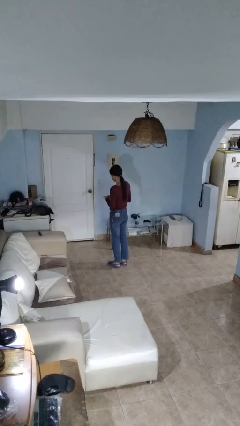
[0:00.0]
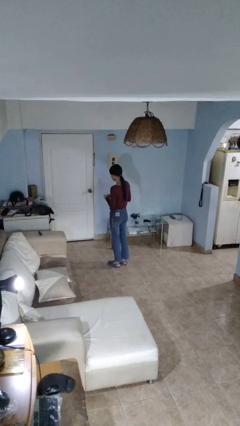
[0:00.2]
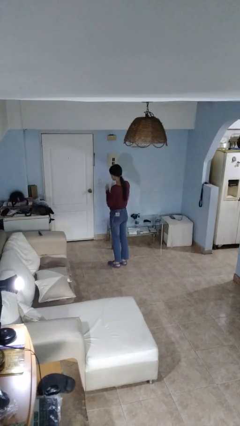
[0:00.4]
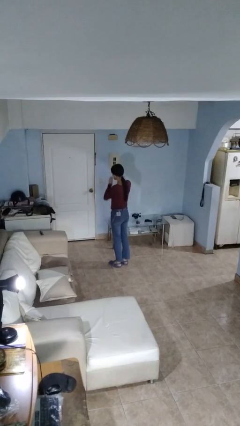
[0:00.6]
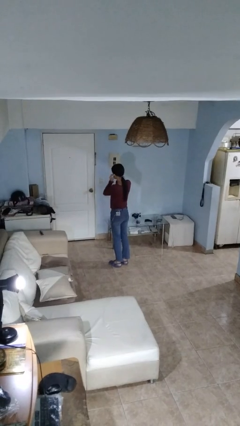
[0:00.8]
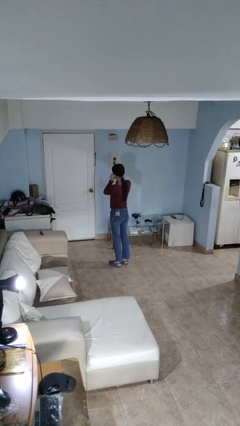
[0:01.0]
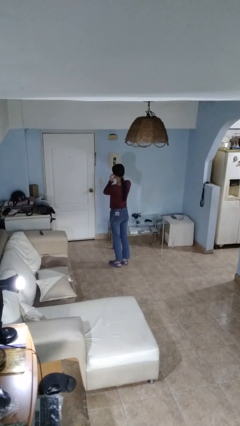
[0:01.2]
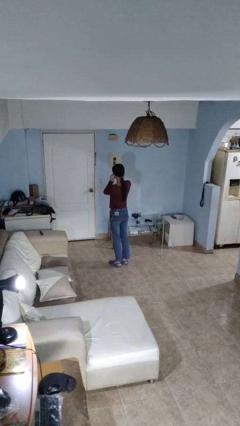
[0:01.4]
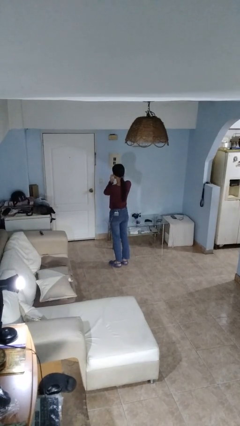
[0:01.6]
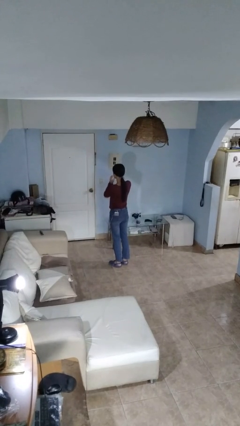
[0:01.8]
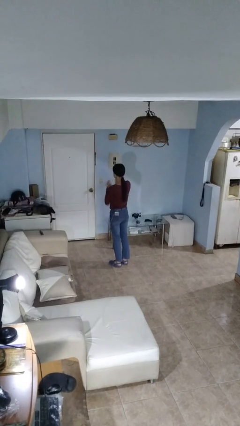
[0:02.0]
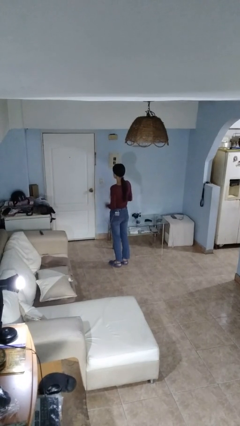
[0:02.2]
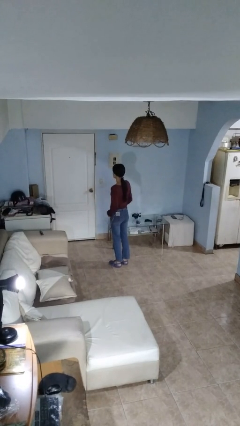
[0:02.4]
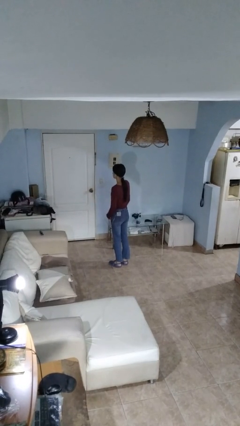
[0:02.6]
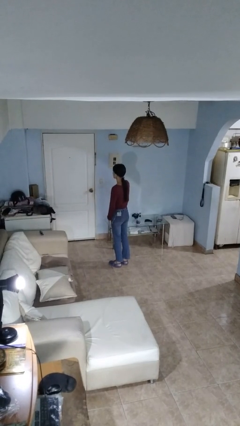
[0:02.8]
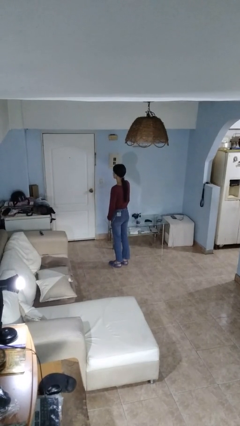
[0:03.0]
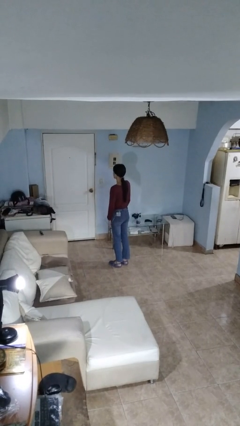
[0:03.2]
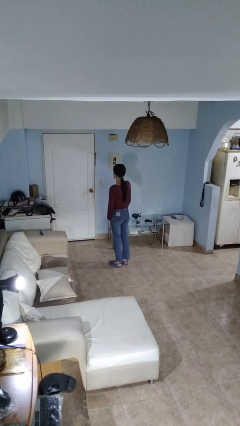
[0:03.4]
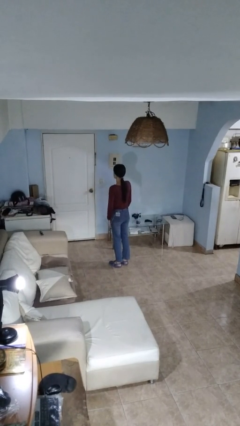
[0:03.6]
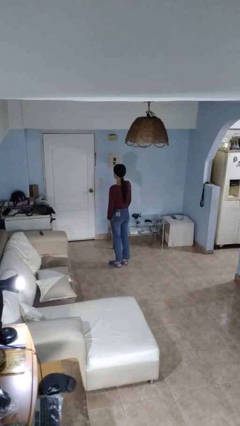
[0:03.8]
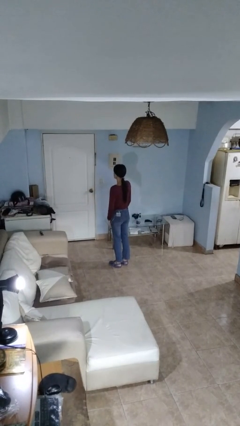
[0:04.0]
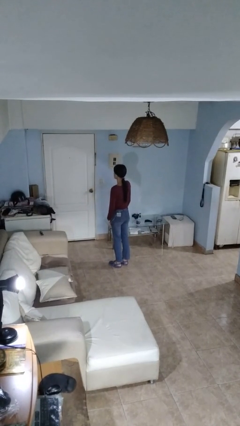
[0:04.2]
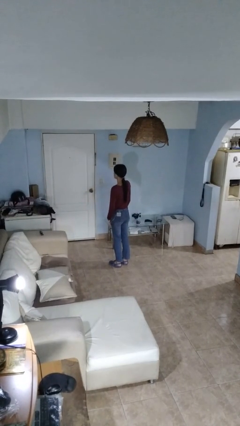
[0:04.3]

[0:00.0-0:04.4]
person puts on headphones

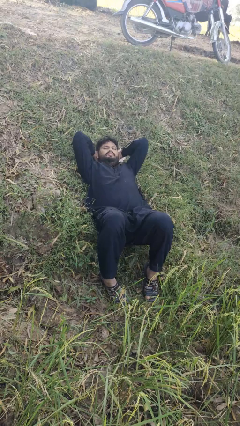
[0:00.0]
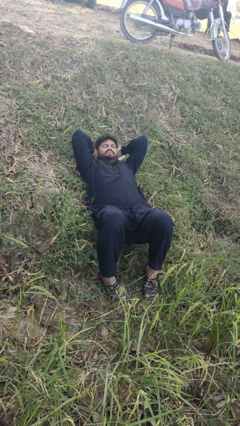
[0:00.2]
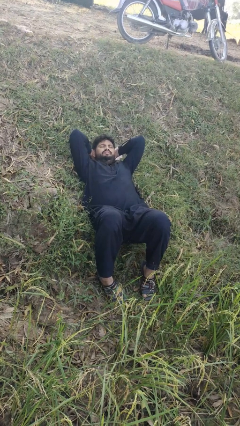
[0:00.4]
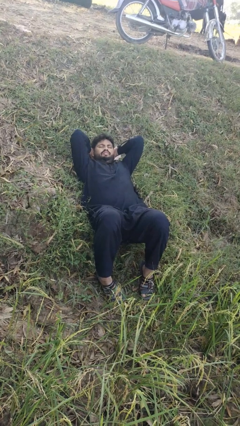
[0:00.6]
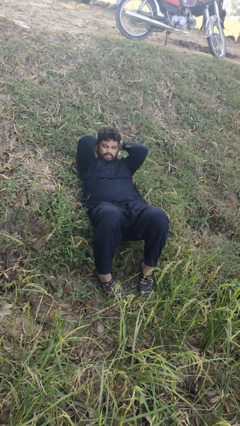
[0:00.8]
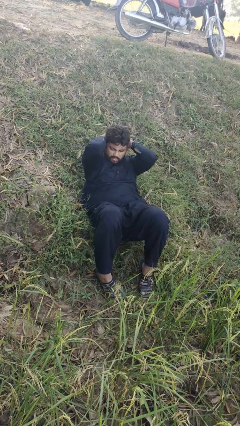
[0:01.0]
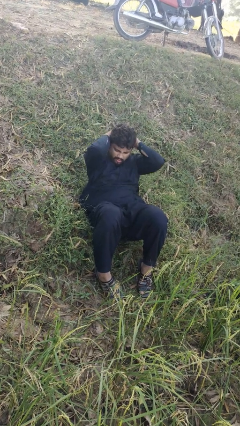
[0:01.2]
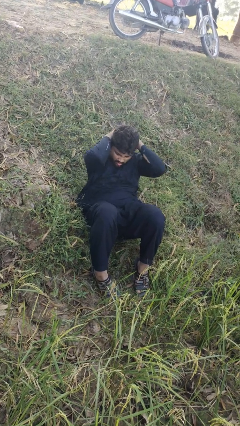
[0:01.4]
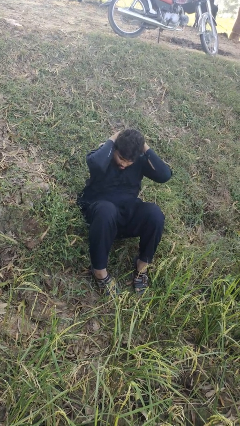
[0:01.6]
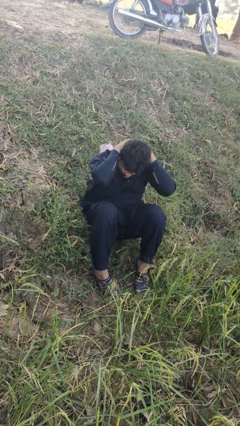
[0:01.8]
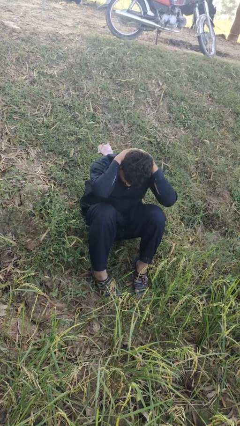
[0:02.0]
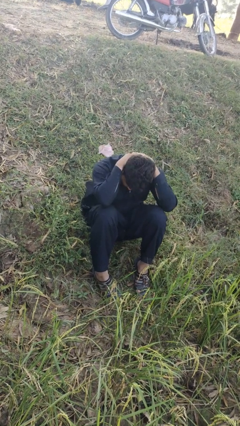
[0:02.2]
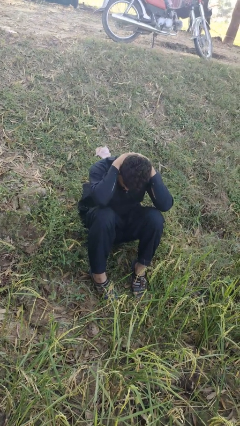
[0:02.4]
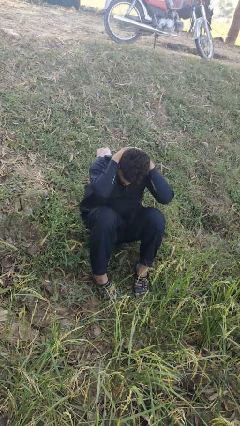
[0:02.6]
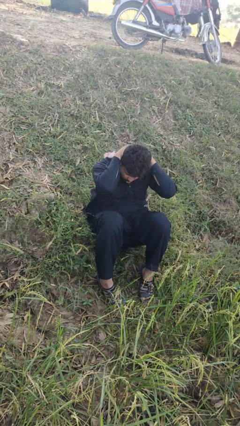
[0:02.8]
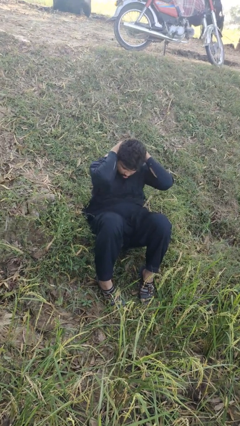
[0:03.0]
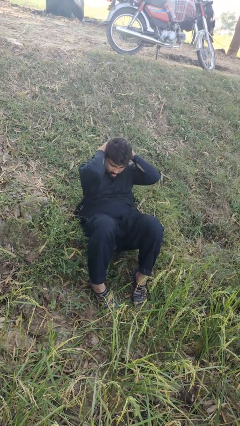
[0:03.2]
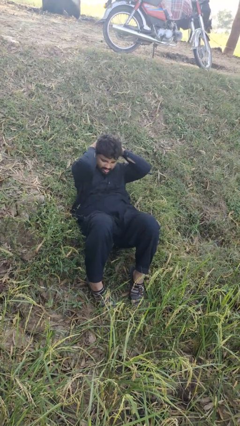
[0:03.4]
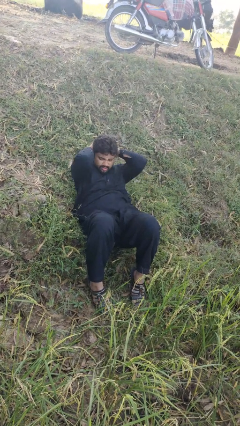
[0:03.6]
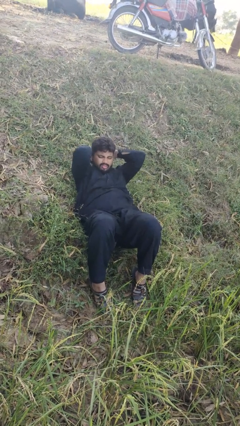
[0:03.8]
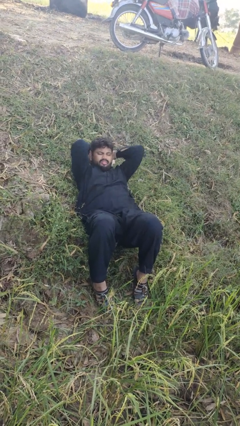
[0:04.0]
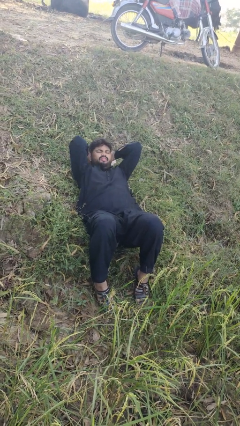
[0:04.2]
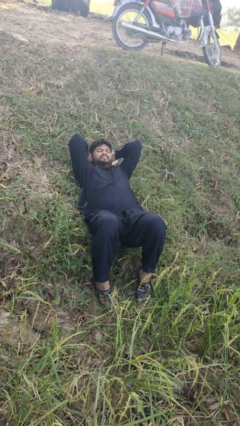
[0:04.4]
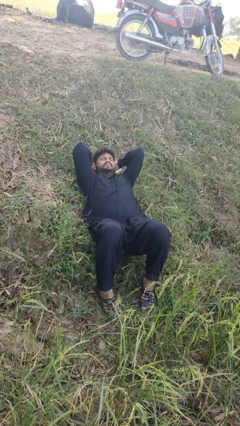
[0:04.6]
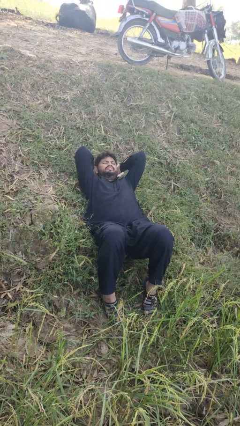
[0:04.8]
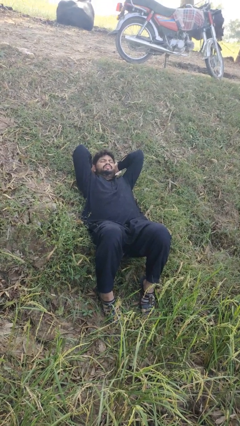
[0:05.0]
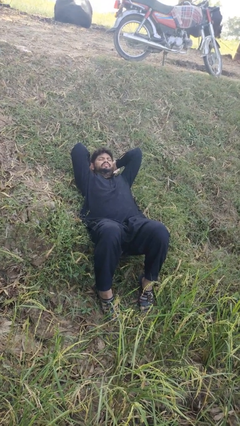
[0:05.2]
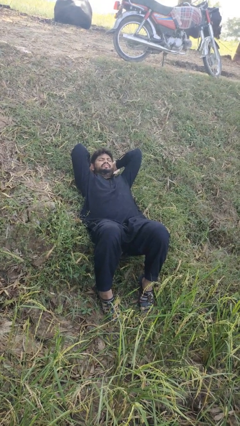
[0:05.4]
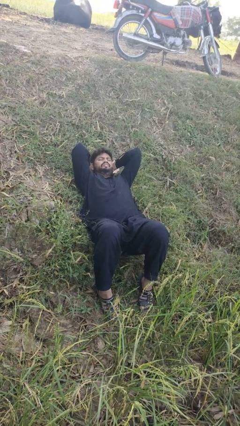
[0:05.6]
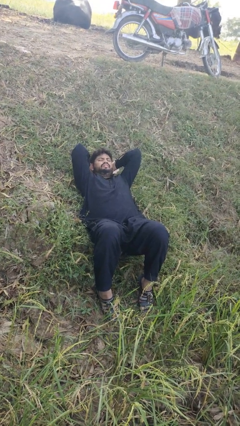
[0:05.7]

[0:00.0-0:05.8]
person exercises with situp

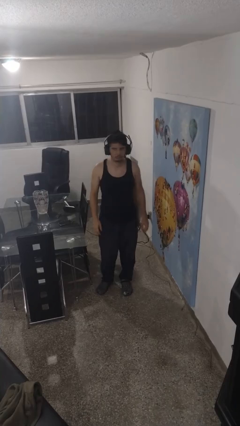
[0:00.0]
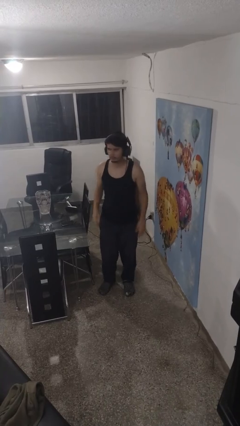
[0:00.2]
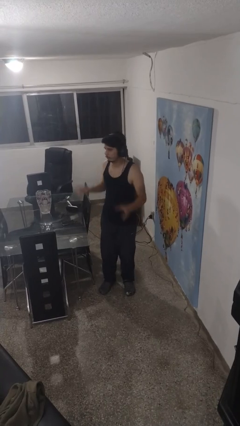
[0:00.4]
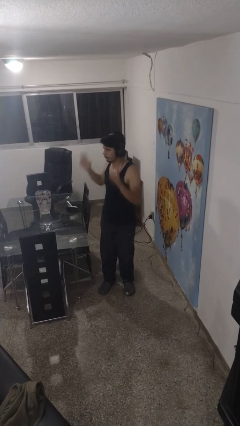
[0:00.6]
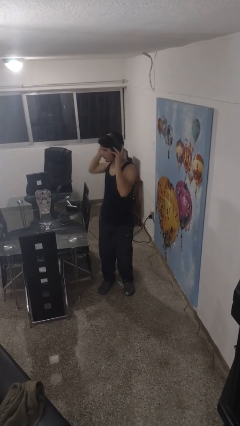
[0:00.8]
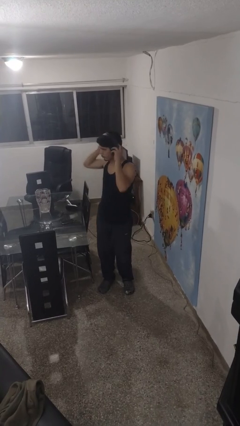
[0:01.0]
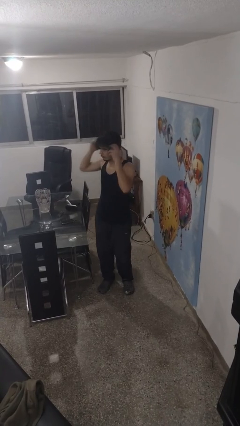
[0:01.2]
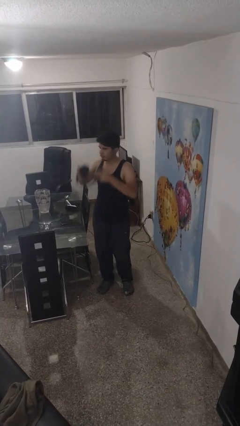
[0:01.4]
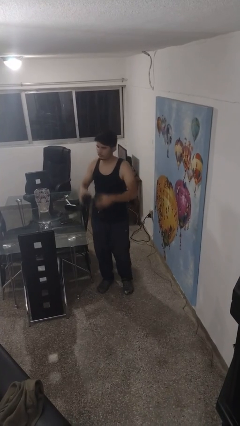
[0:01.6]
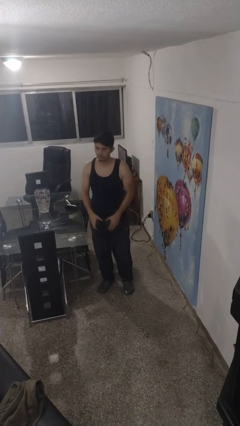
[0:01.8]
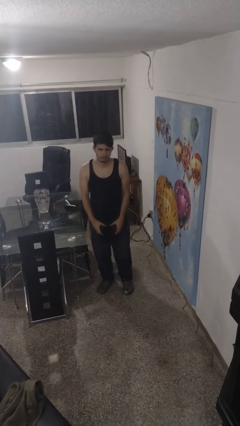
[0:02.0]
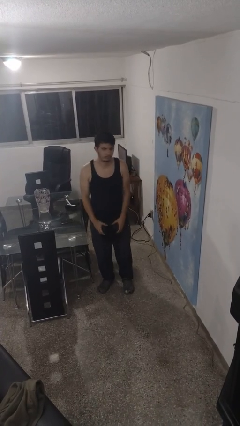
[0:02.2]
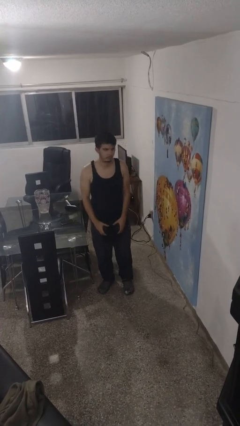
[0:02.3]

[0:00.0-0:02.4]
person takes off headphones

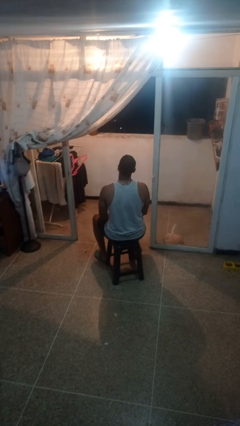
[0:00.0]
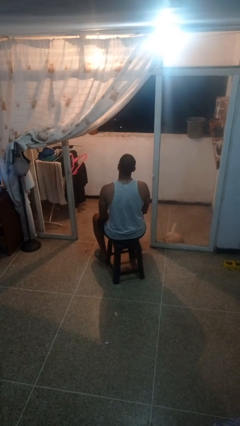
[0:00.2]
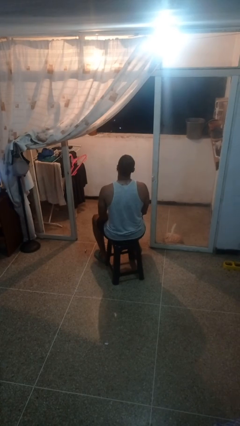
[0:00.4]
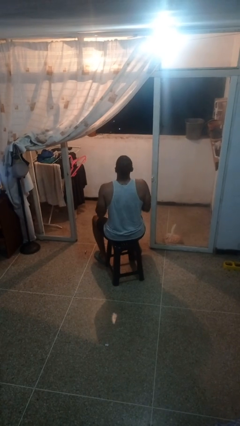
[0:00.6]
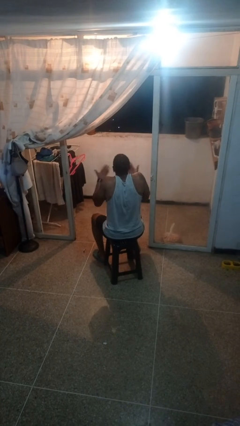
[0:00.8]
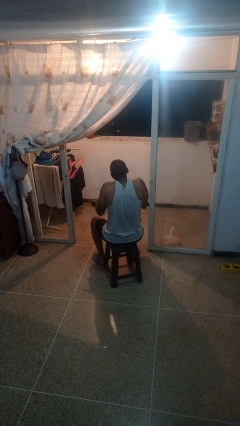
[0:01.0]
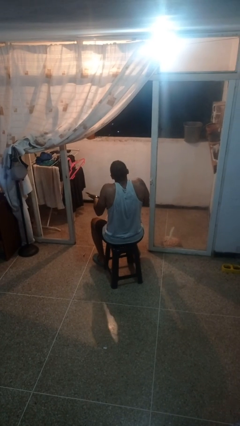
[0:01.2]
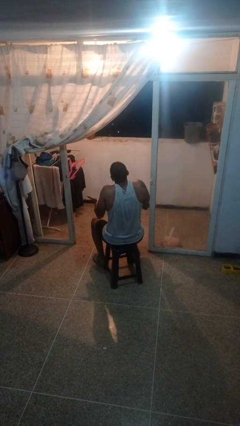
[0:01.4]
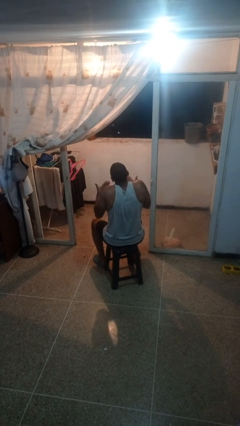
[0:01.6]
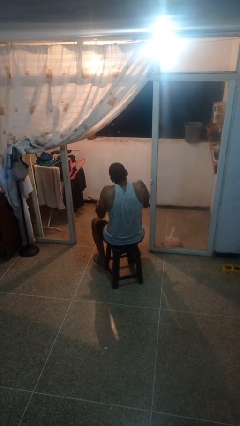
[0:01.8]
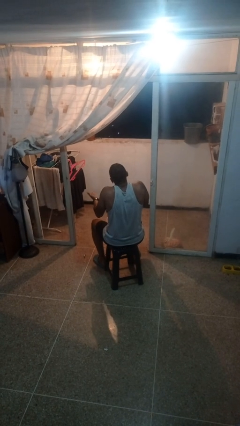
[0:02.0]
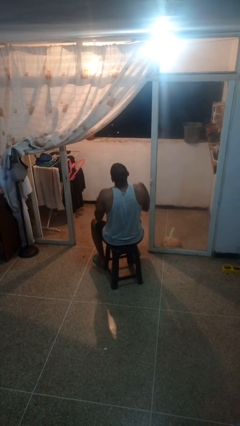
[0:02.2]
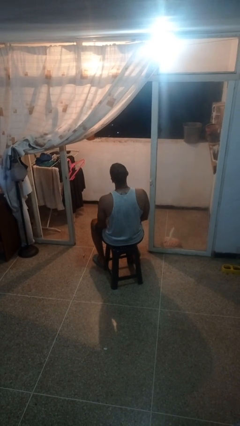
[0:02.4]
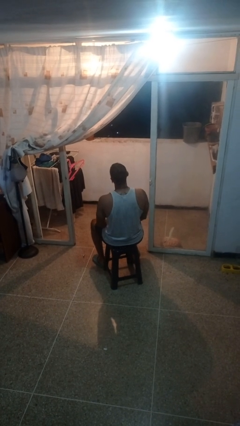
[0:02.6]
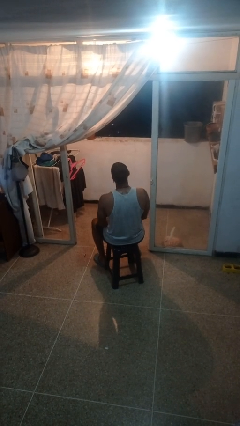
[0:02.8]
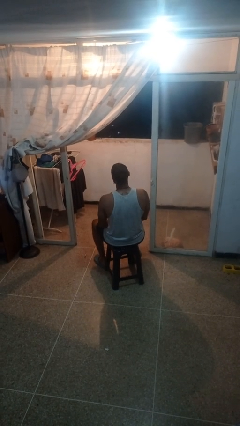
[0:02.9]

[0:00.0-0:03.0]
person shrugs

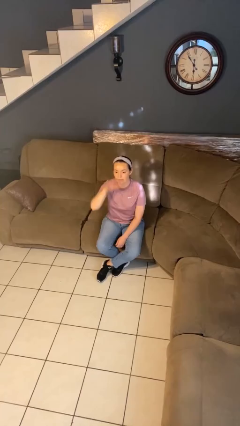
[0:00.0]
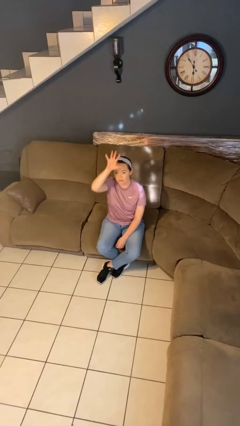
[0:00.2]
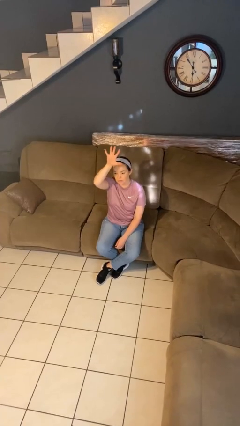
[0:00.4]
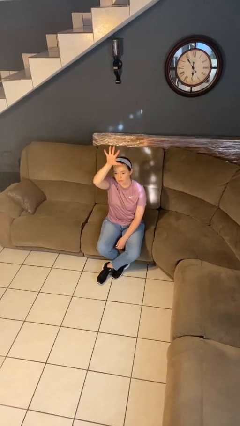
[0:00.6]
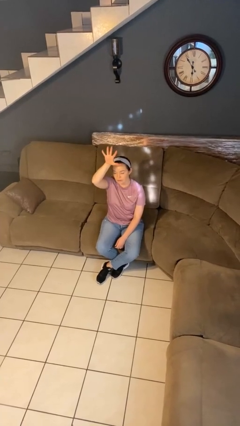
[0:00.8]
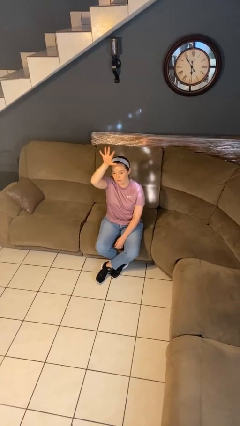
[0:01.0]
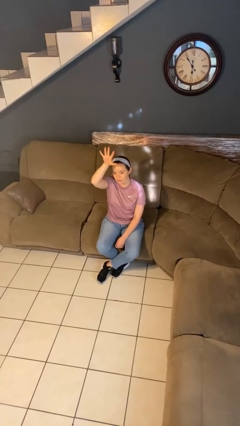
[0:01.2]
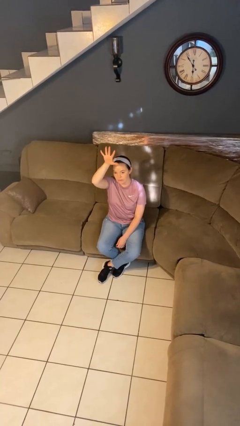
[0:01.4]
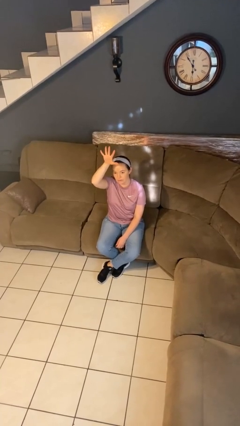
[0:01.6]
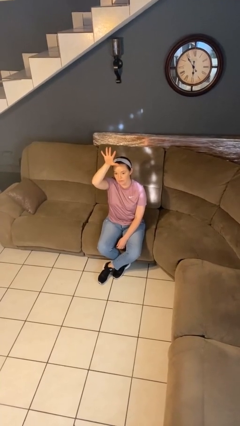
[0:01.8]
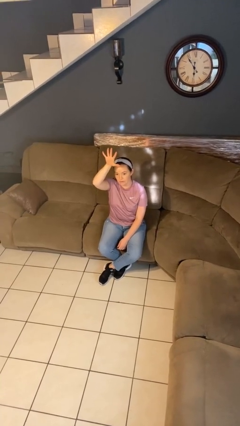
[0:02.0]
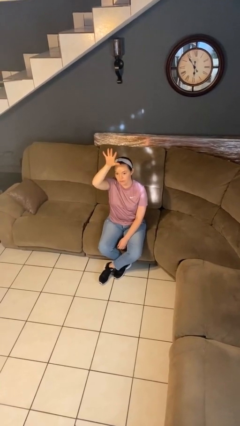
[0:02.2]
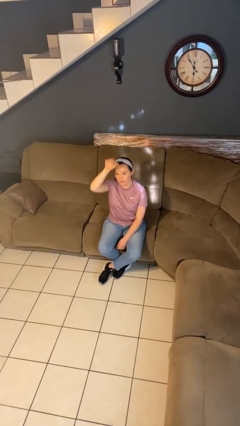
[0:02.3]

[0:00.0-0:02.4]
person gestures number five
